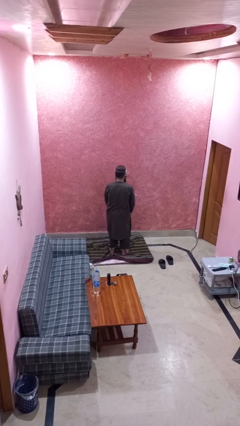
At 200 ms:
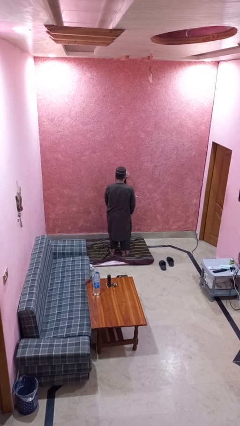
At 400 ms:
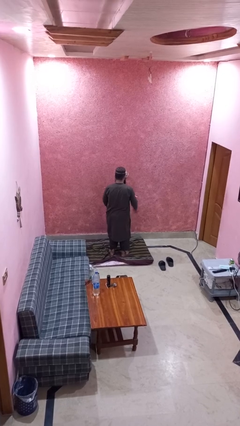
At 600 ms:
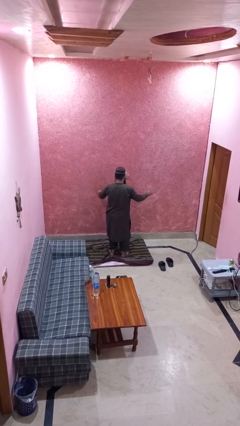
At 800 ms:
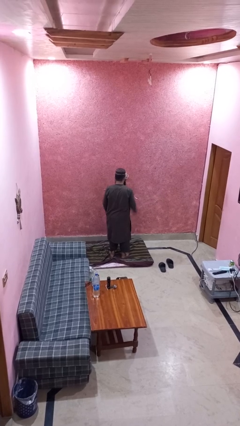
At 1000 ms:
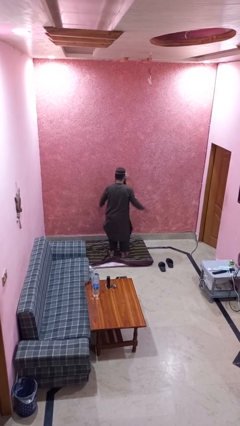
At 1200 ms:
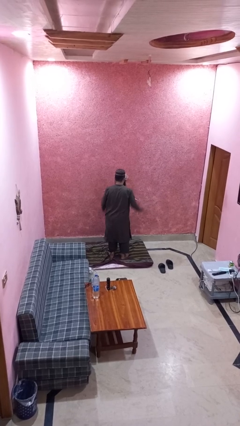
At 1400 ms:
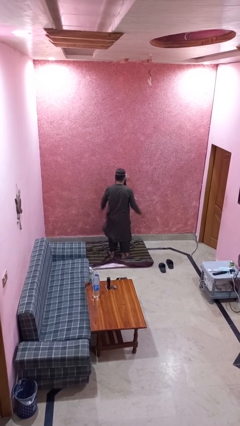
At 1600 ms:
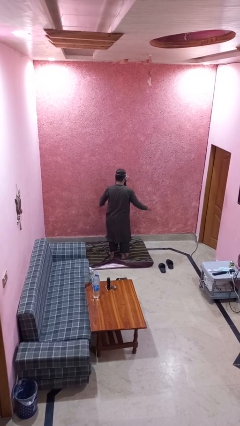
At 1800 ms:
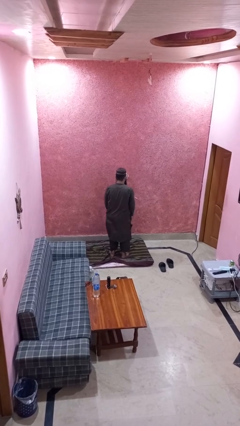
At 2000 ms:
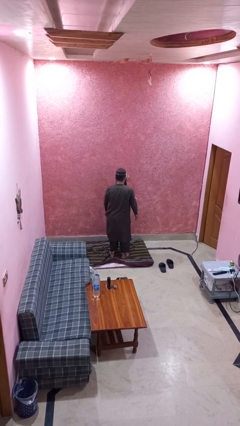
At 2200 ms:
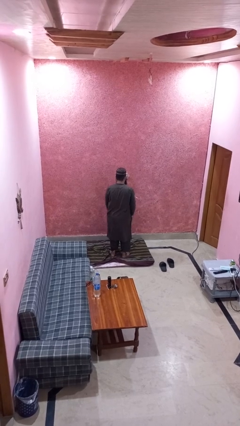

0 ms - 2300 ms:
person slaps hands on thighs

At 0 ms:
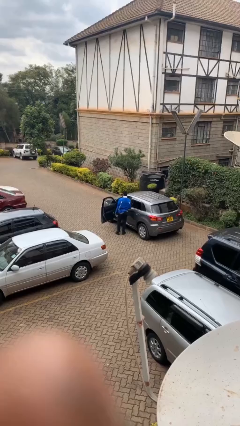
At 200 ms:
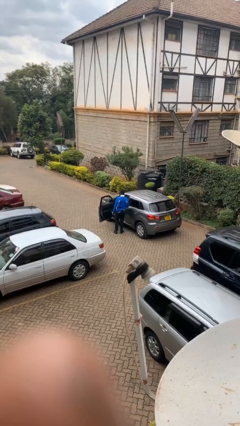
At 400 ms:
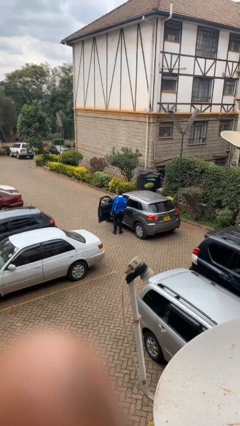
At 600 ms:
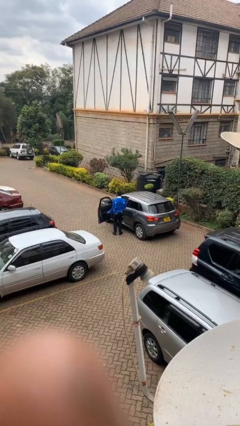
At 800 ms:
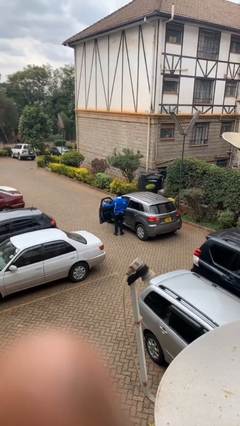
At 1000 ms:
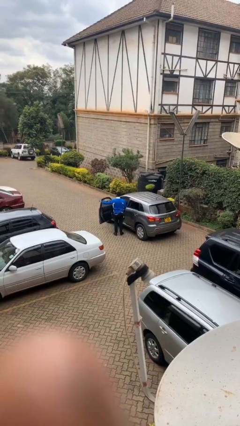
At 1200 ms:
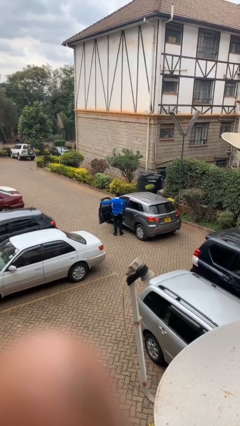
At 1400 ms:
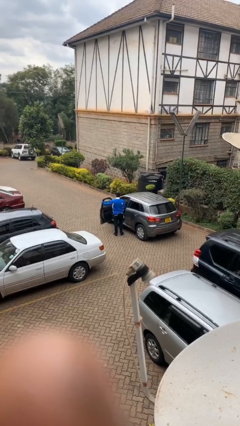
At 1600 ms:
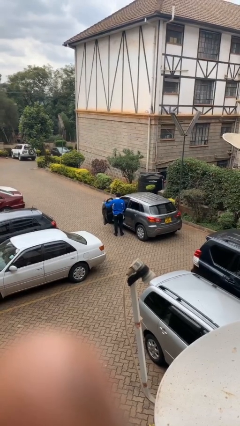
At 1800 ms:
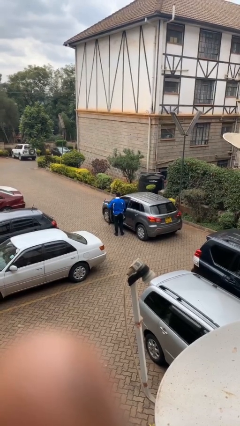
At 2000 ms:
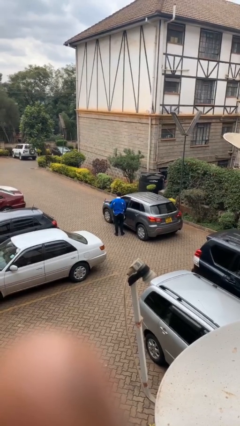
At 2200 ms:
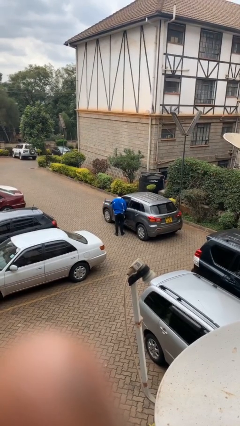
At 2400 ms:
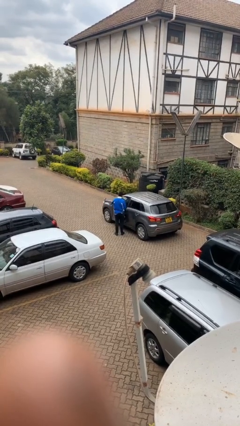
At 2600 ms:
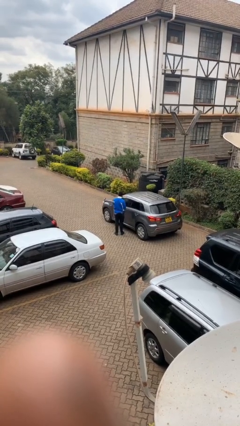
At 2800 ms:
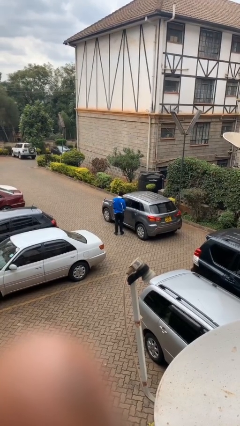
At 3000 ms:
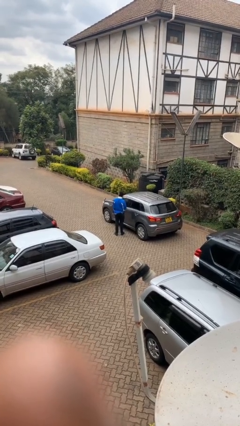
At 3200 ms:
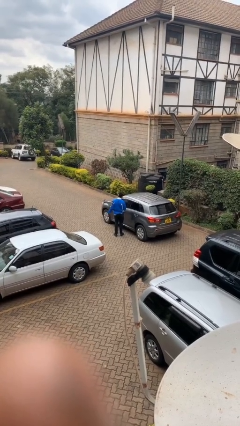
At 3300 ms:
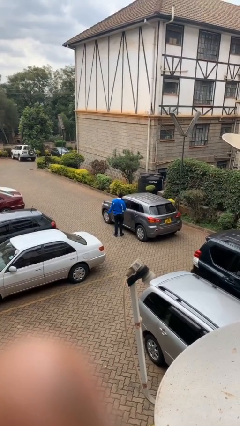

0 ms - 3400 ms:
person closes car door

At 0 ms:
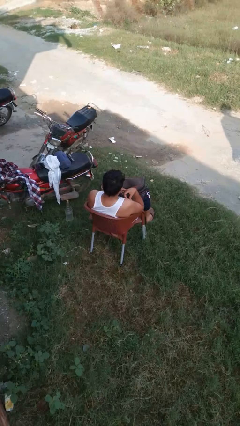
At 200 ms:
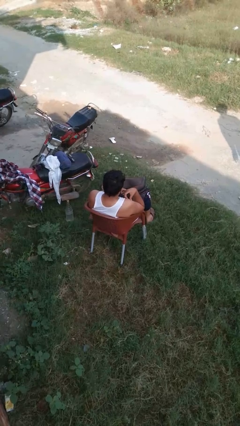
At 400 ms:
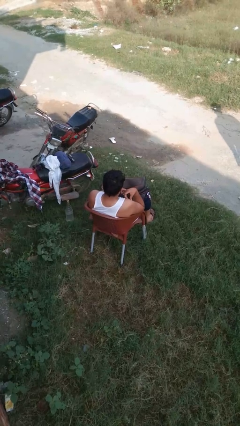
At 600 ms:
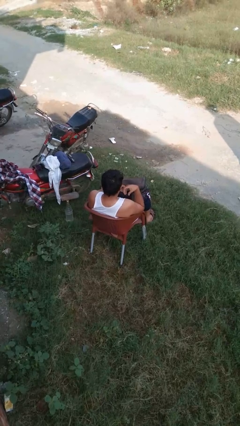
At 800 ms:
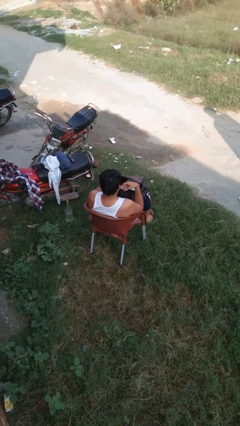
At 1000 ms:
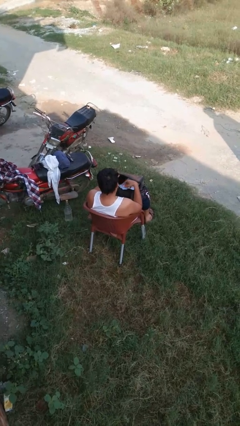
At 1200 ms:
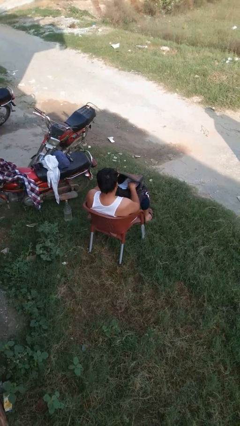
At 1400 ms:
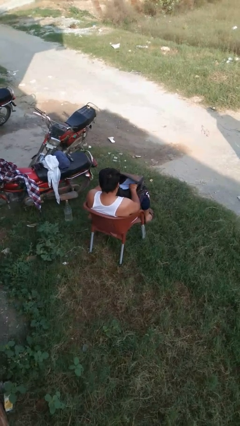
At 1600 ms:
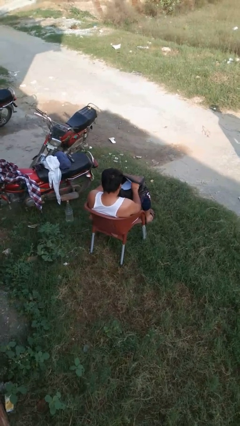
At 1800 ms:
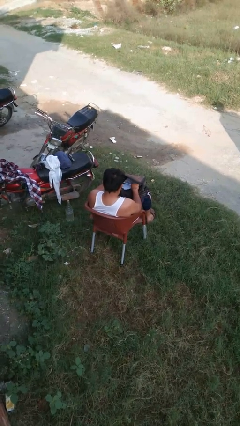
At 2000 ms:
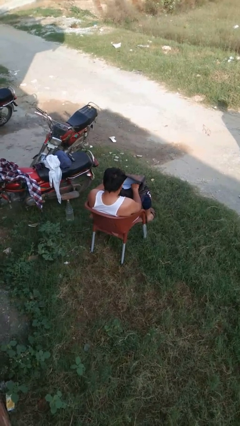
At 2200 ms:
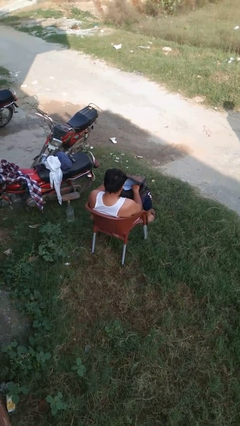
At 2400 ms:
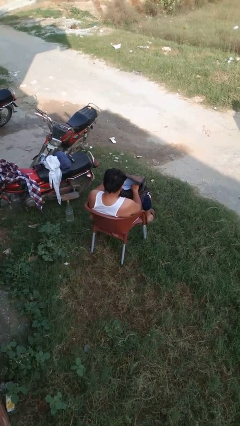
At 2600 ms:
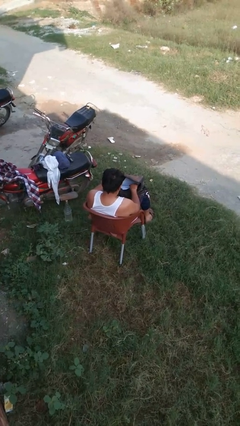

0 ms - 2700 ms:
person searches in backpack

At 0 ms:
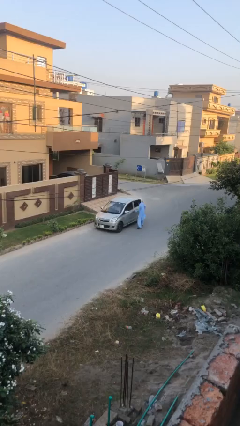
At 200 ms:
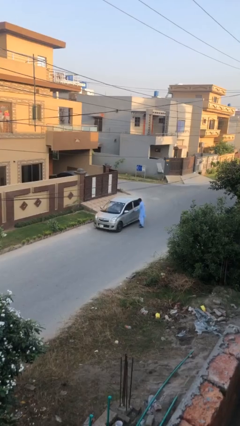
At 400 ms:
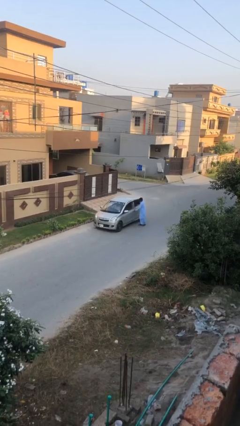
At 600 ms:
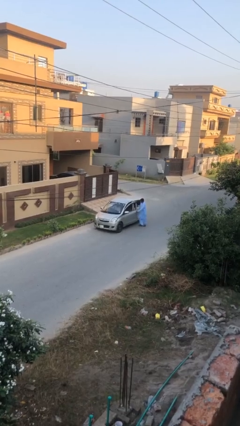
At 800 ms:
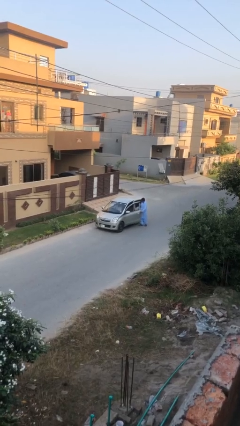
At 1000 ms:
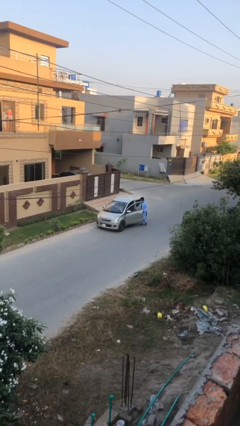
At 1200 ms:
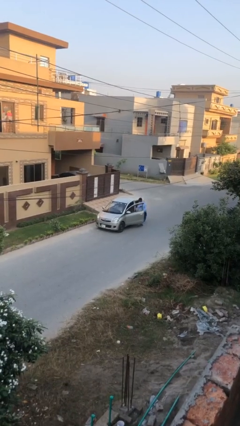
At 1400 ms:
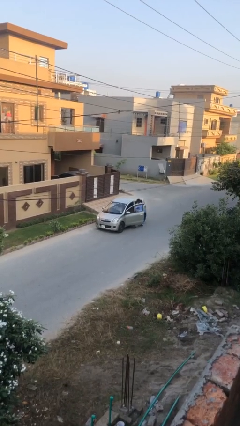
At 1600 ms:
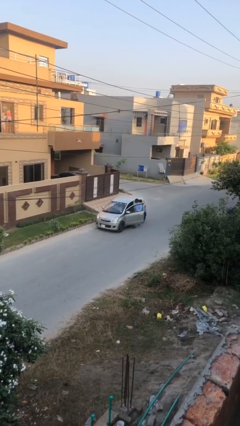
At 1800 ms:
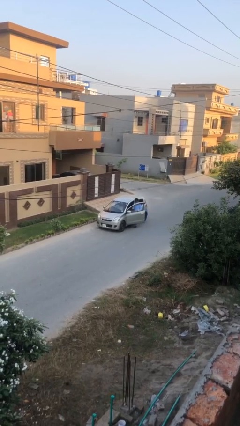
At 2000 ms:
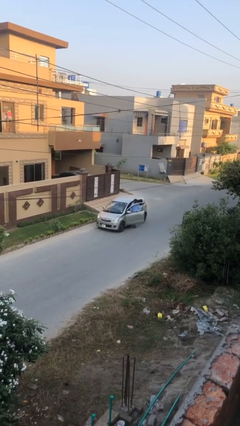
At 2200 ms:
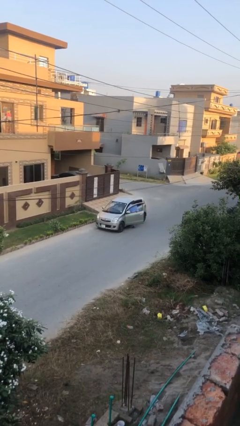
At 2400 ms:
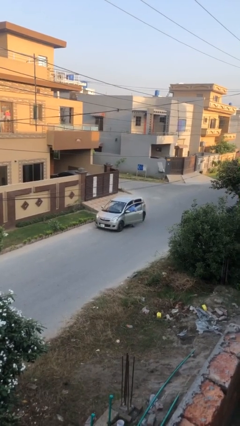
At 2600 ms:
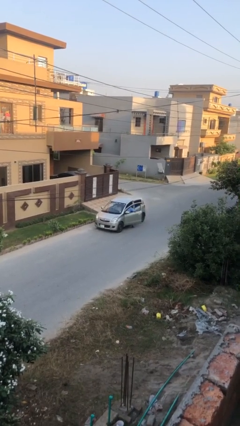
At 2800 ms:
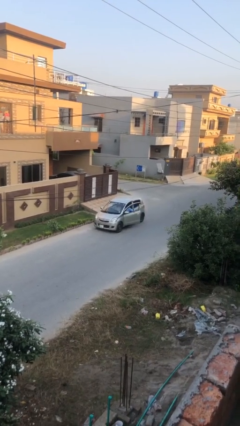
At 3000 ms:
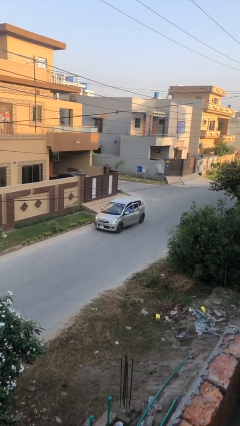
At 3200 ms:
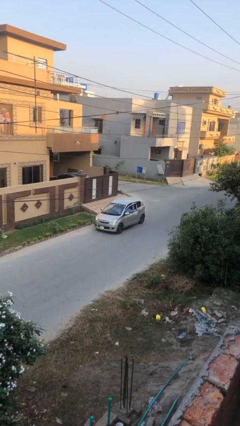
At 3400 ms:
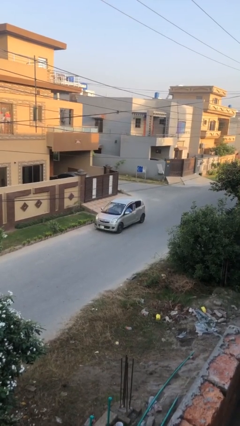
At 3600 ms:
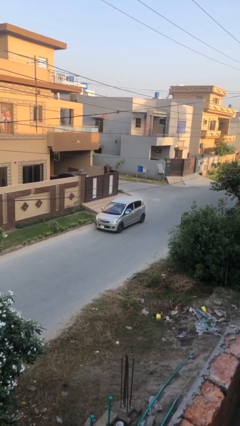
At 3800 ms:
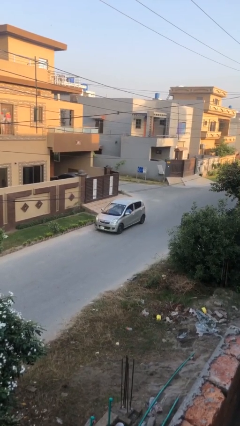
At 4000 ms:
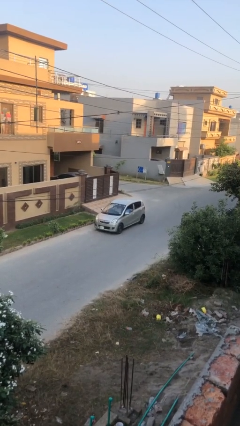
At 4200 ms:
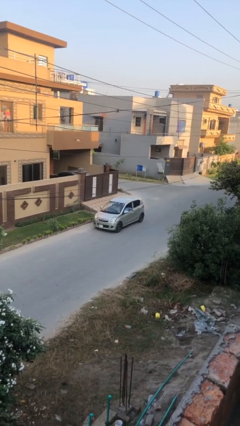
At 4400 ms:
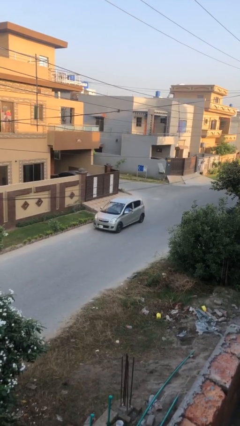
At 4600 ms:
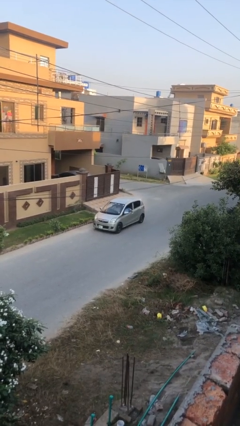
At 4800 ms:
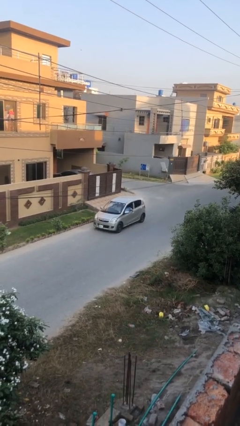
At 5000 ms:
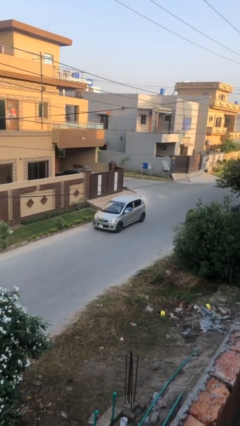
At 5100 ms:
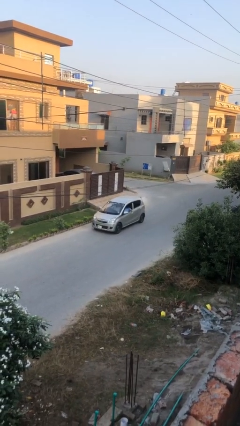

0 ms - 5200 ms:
car picks up person

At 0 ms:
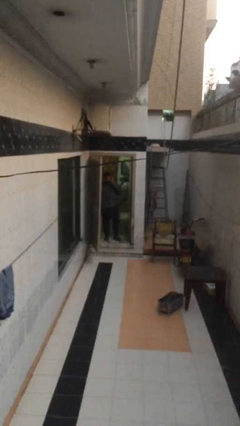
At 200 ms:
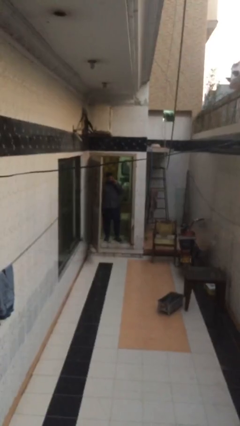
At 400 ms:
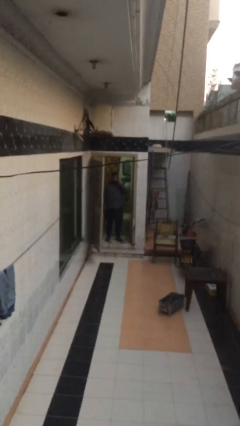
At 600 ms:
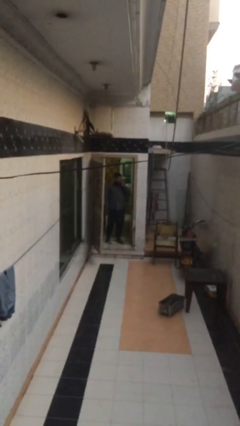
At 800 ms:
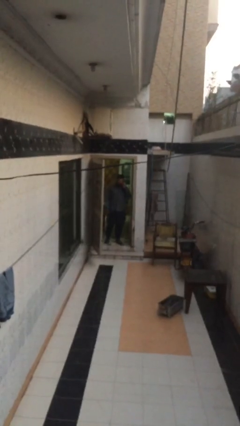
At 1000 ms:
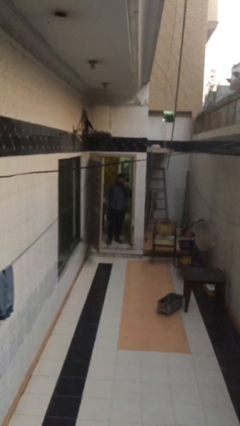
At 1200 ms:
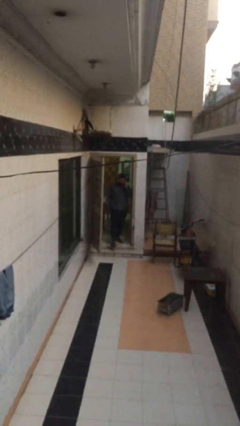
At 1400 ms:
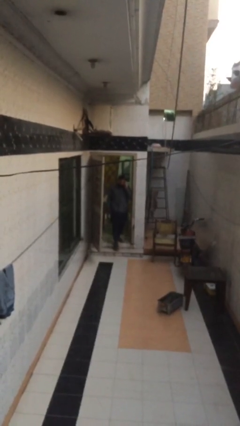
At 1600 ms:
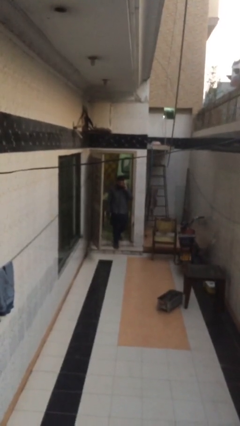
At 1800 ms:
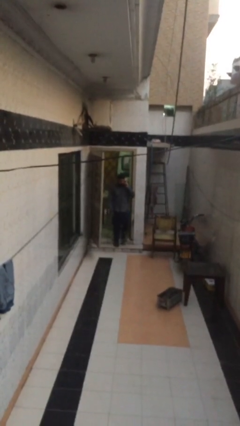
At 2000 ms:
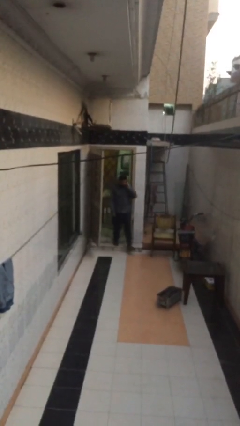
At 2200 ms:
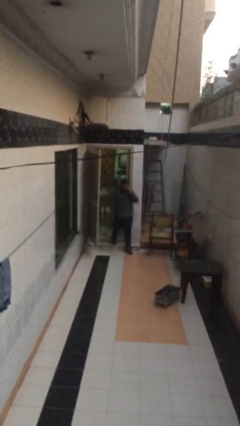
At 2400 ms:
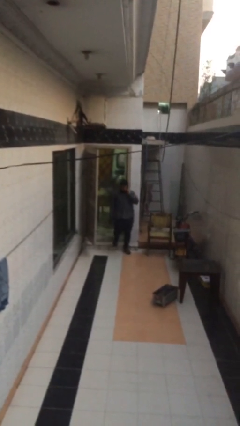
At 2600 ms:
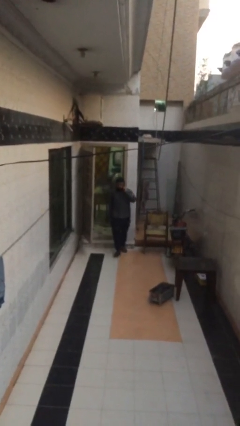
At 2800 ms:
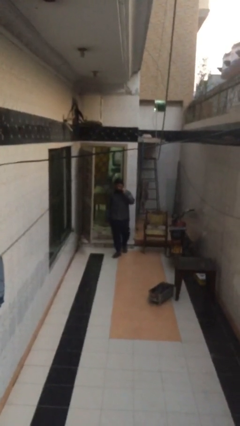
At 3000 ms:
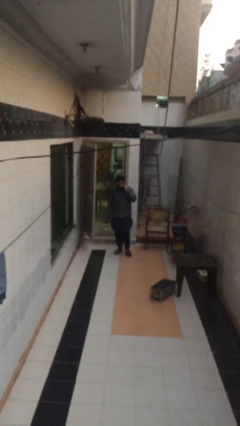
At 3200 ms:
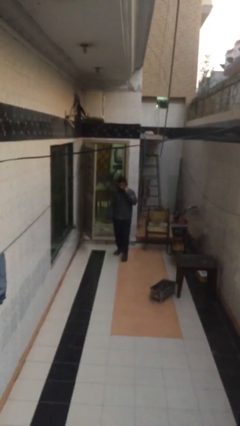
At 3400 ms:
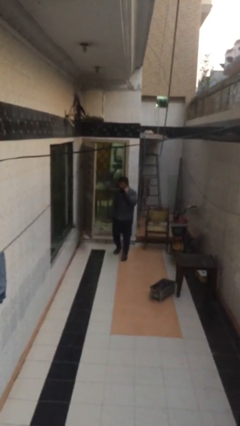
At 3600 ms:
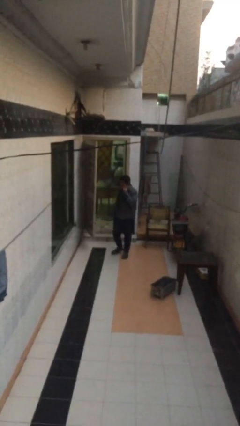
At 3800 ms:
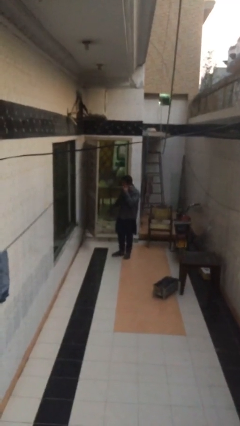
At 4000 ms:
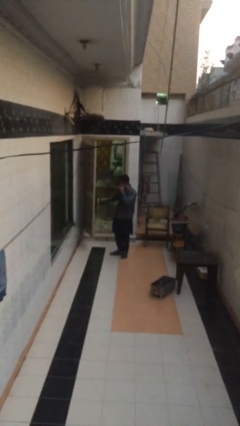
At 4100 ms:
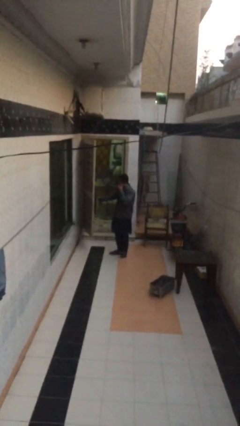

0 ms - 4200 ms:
person enters scene through structure
